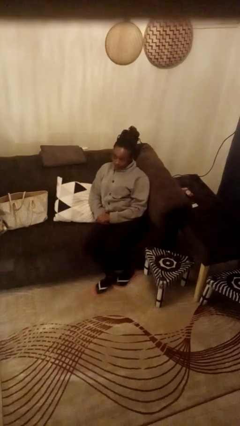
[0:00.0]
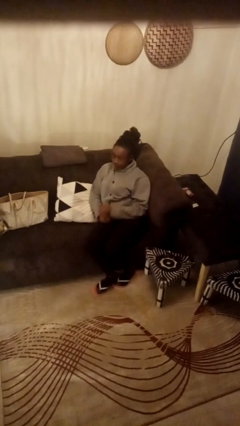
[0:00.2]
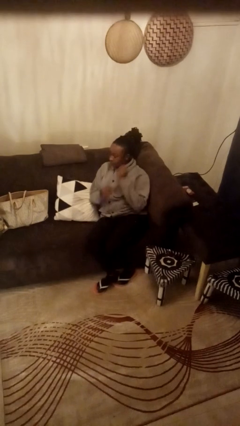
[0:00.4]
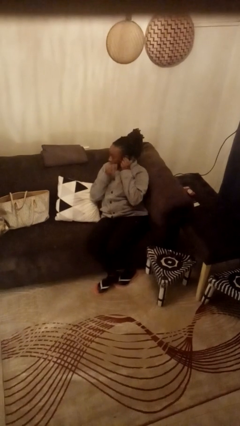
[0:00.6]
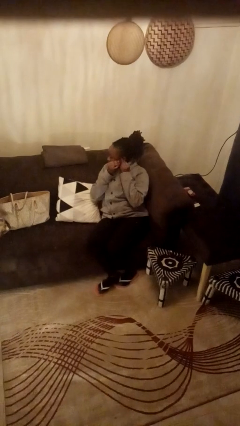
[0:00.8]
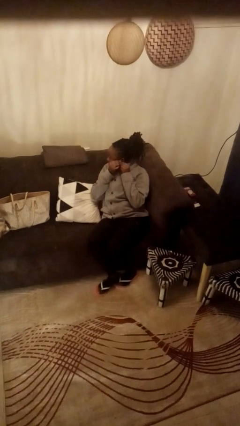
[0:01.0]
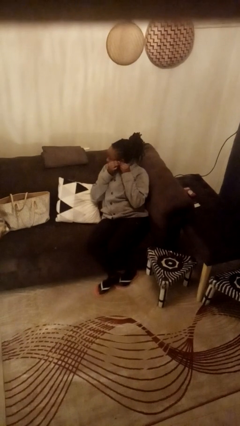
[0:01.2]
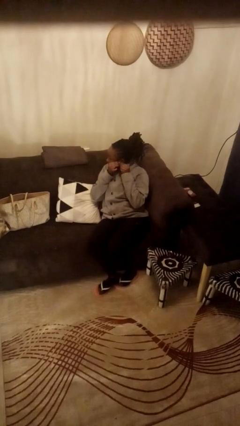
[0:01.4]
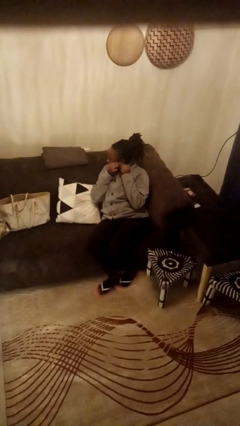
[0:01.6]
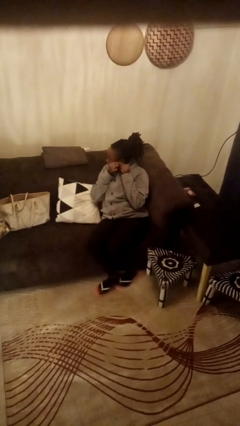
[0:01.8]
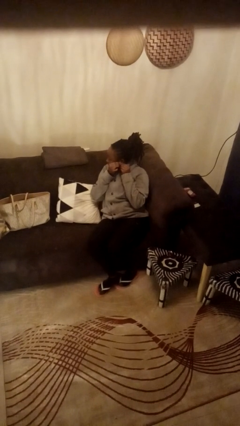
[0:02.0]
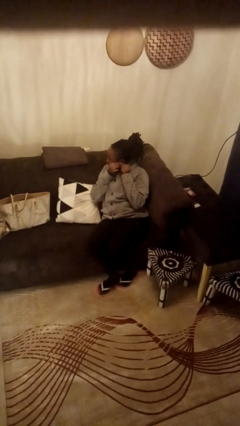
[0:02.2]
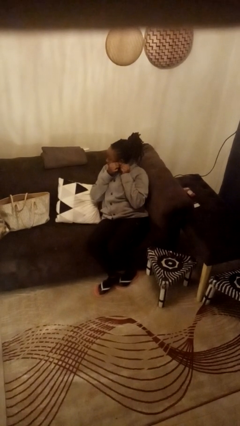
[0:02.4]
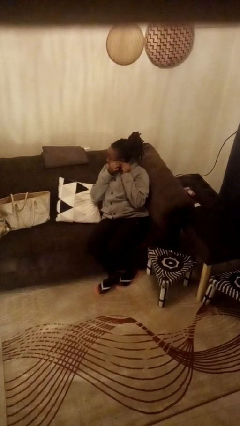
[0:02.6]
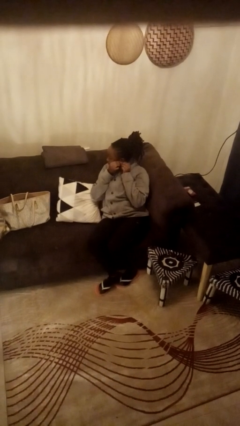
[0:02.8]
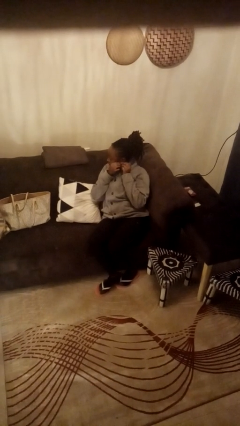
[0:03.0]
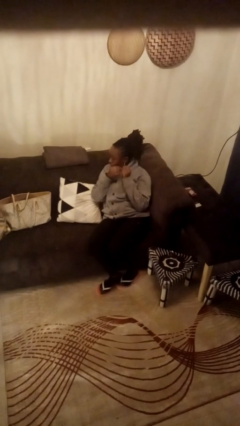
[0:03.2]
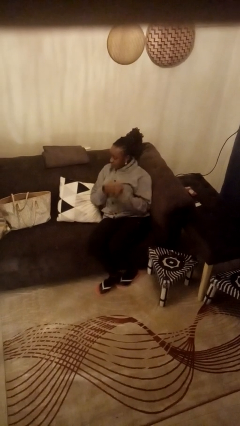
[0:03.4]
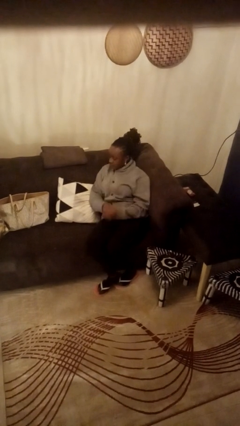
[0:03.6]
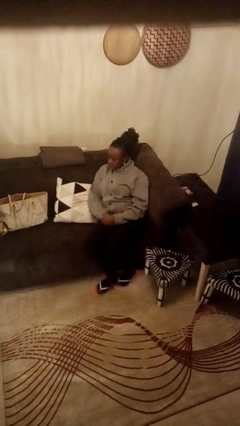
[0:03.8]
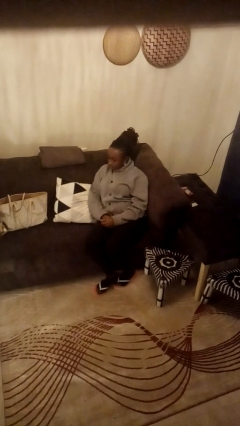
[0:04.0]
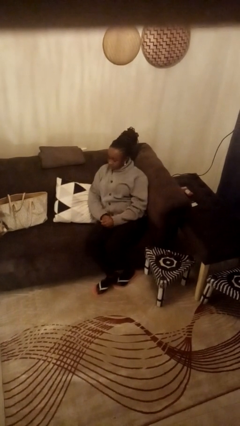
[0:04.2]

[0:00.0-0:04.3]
person puts on earrings

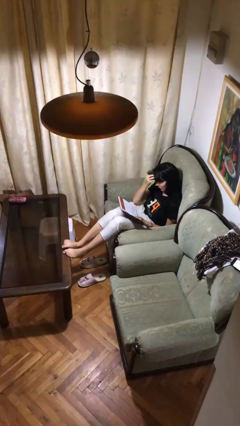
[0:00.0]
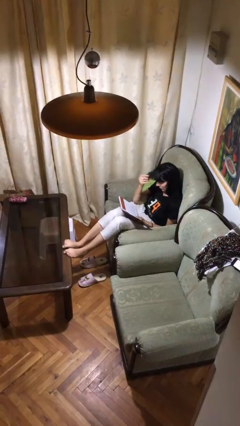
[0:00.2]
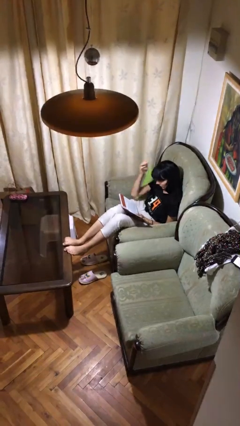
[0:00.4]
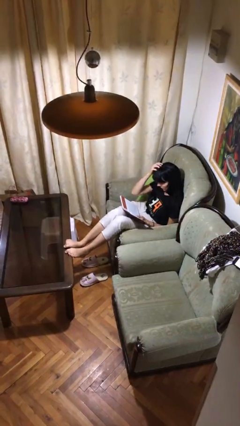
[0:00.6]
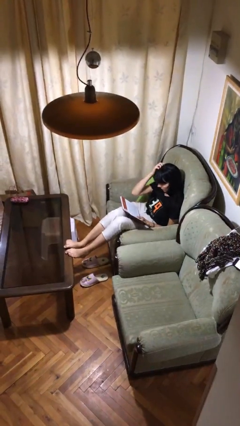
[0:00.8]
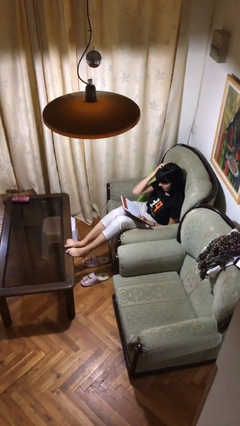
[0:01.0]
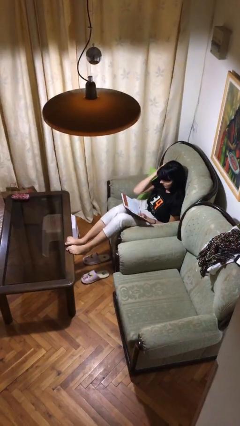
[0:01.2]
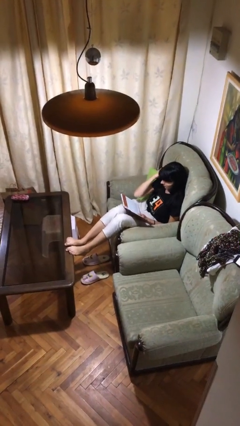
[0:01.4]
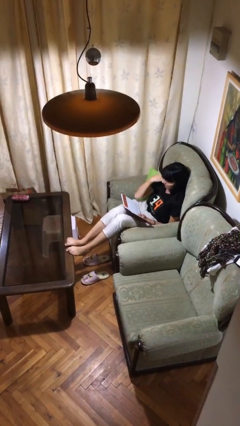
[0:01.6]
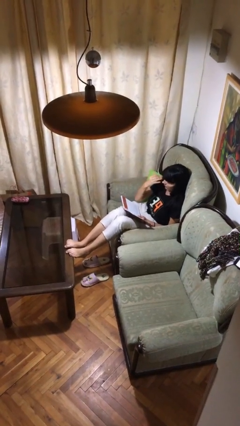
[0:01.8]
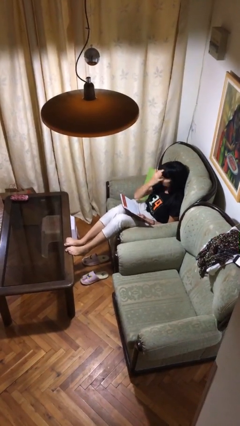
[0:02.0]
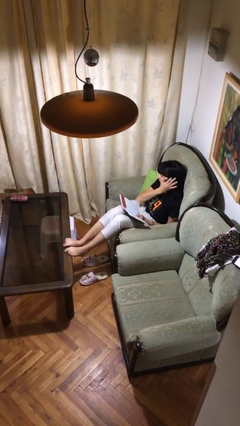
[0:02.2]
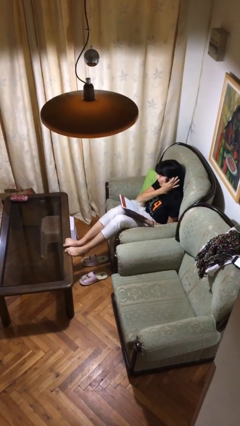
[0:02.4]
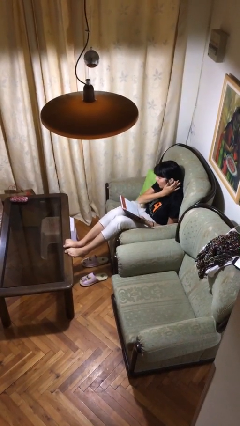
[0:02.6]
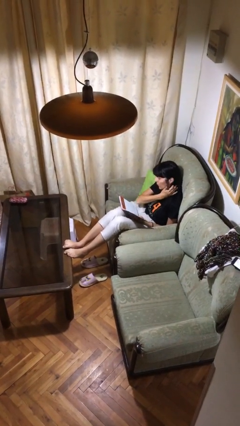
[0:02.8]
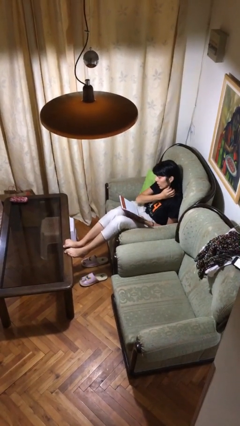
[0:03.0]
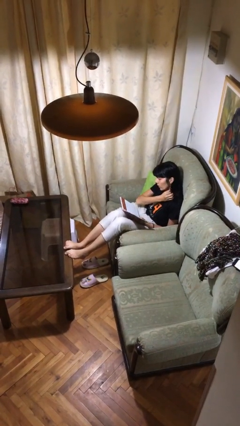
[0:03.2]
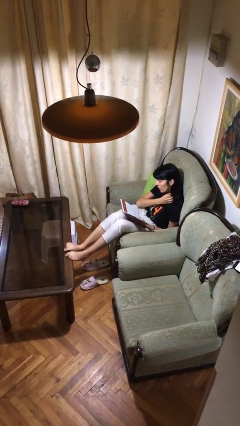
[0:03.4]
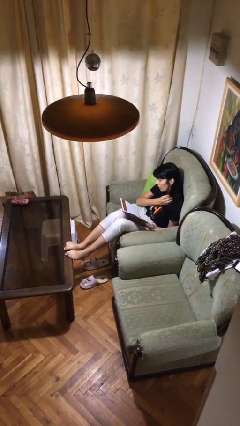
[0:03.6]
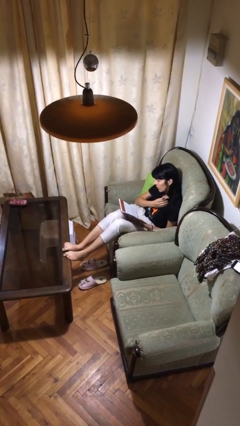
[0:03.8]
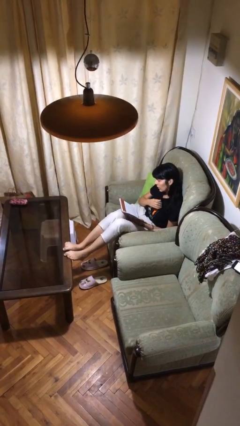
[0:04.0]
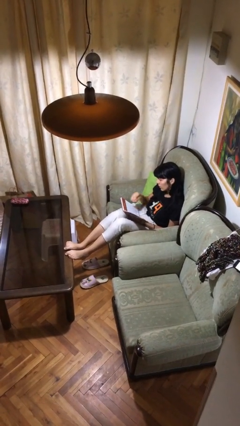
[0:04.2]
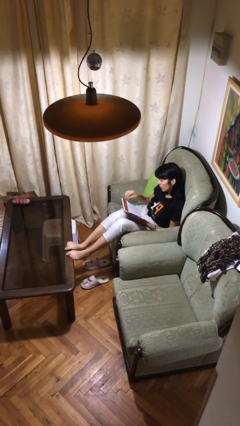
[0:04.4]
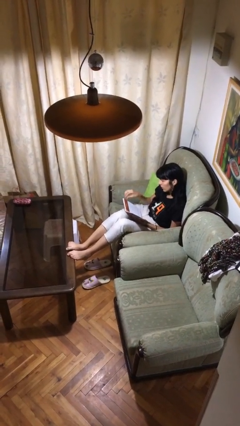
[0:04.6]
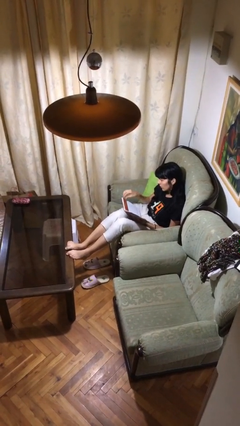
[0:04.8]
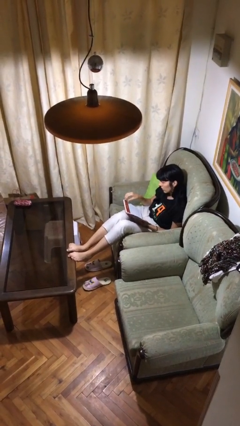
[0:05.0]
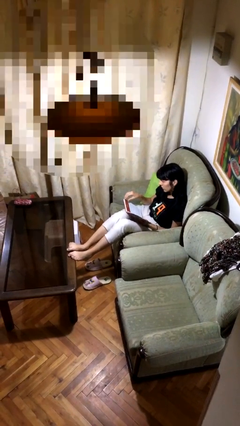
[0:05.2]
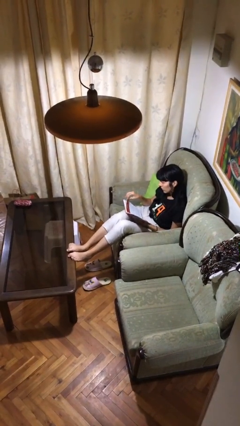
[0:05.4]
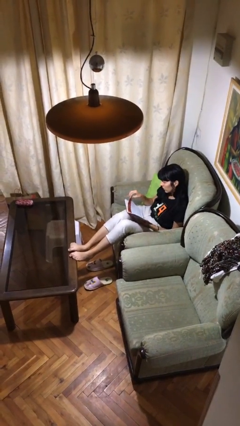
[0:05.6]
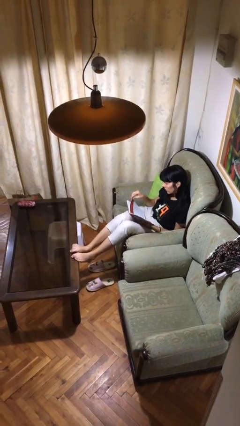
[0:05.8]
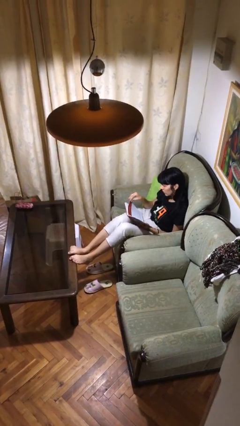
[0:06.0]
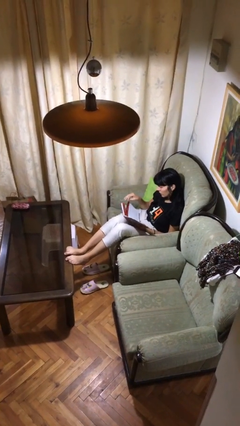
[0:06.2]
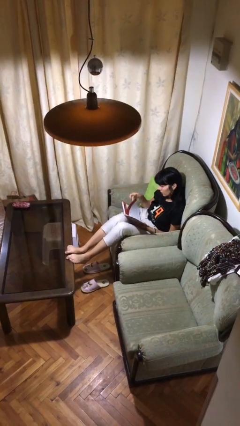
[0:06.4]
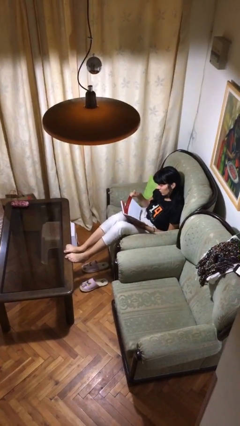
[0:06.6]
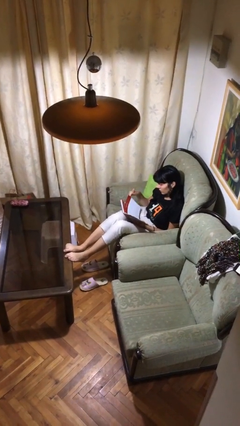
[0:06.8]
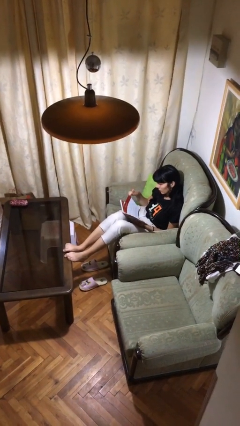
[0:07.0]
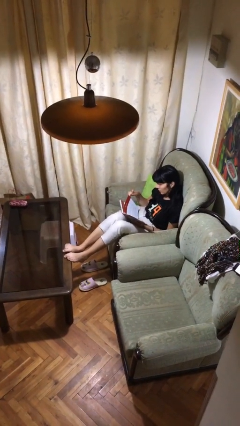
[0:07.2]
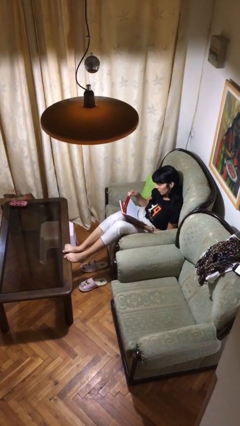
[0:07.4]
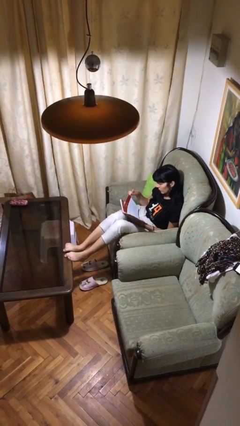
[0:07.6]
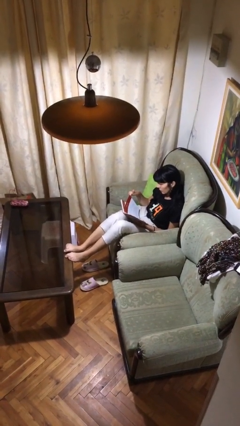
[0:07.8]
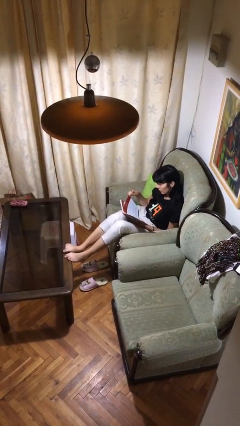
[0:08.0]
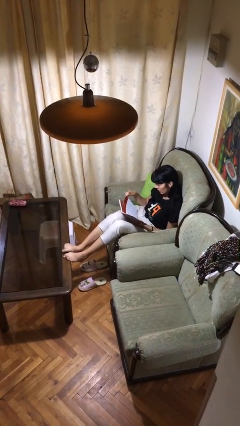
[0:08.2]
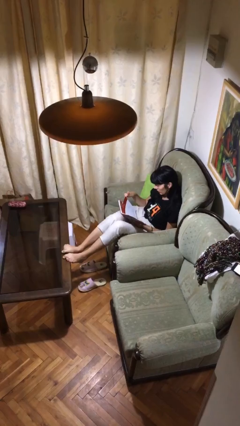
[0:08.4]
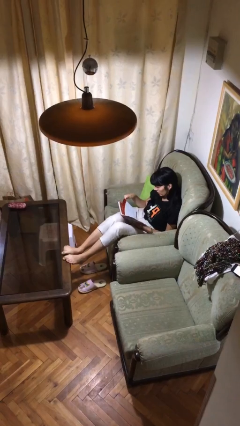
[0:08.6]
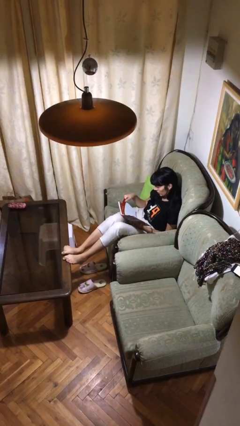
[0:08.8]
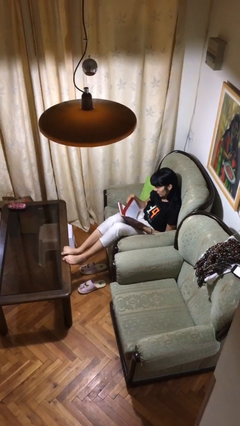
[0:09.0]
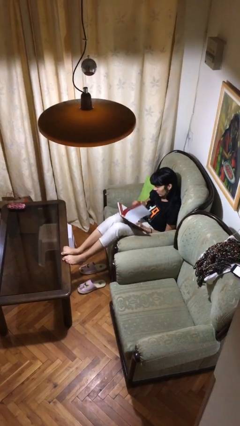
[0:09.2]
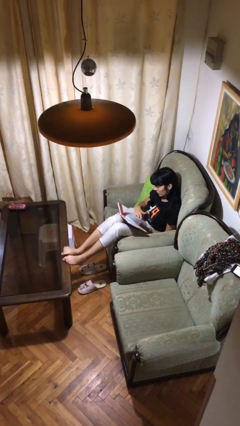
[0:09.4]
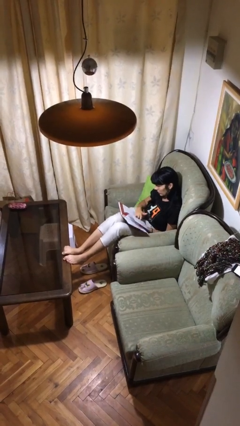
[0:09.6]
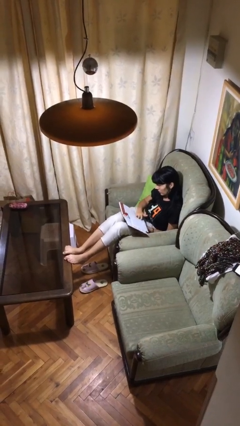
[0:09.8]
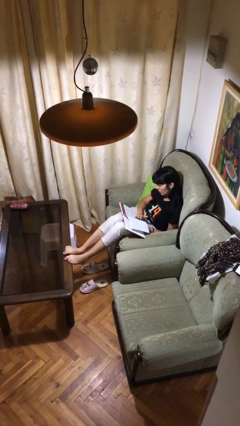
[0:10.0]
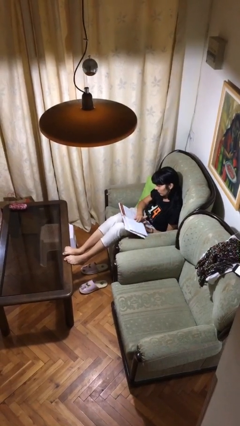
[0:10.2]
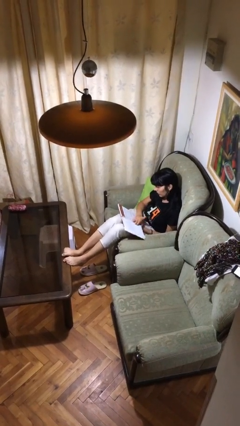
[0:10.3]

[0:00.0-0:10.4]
person reads document

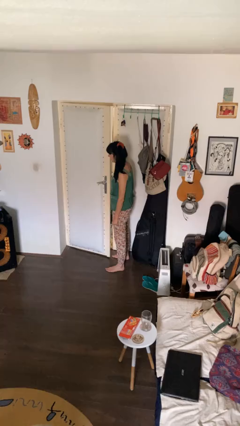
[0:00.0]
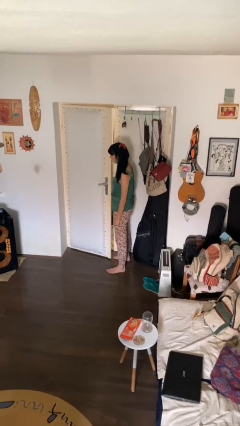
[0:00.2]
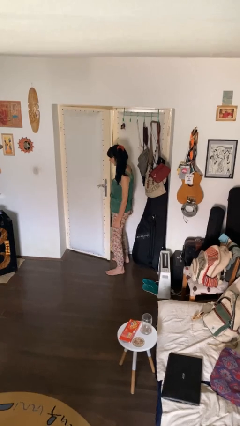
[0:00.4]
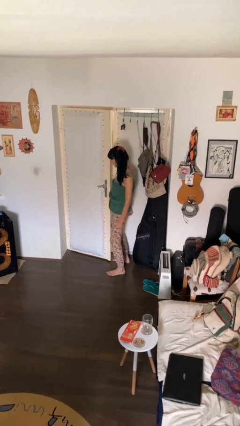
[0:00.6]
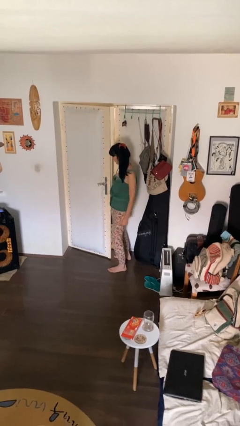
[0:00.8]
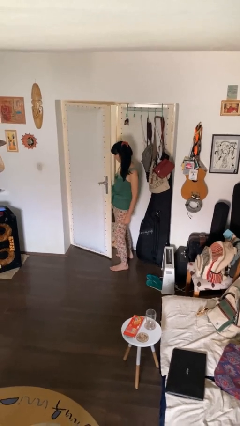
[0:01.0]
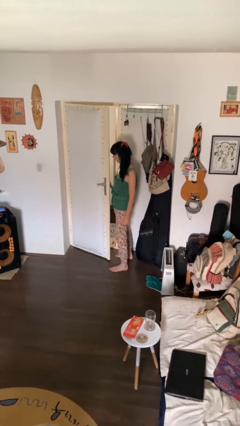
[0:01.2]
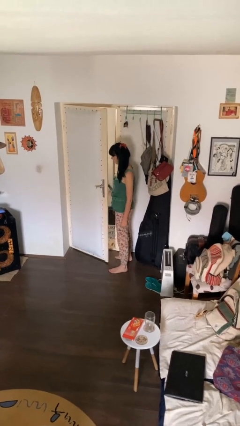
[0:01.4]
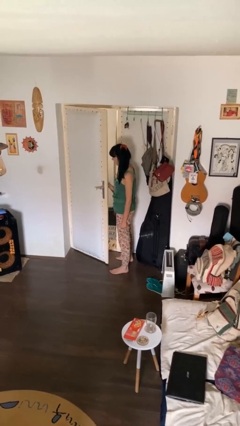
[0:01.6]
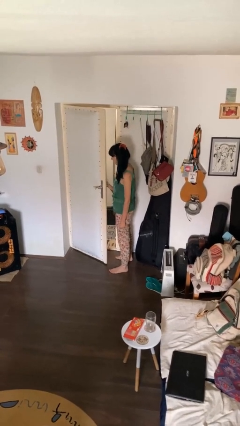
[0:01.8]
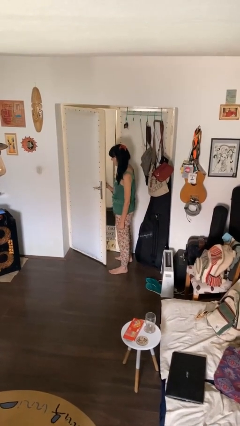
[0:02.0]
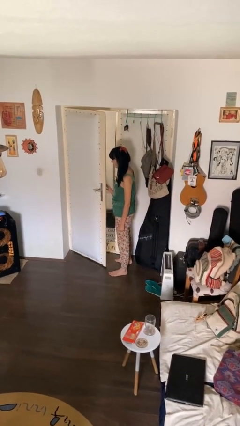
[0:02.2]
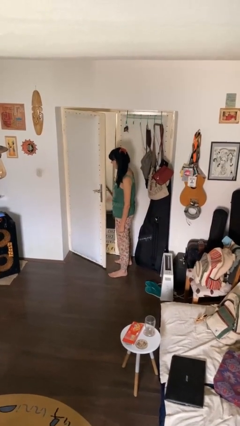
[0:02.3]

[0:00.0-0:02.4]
person opens facility door

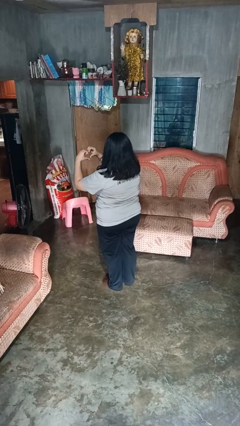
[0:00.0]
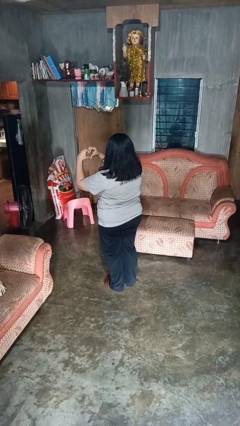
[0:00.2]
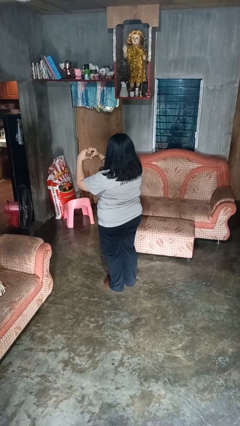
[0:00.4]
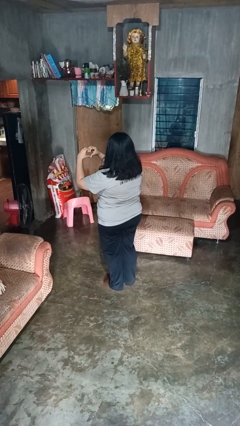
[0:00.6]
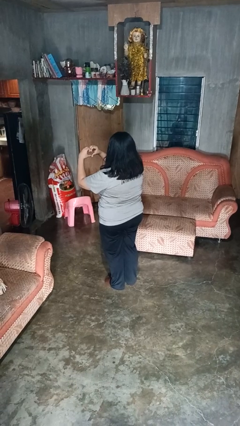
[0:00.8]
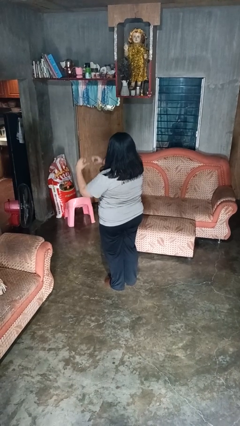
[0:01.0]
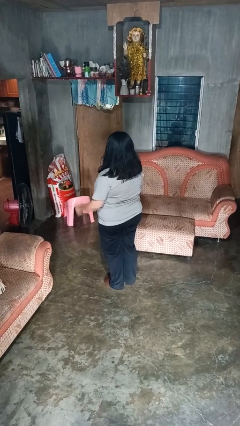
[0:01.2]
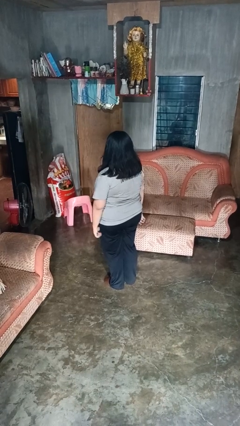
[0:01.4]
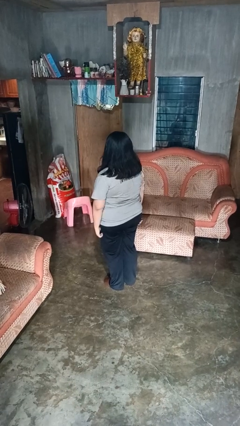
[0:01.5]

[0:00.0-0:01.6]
person gestures heart
